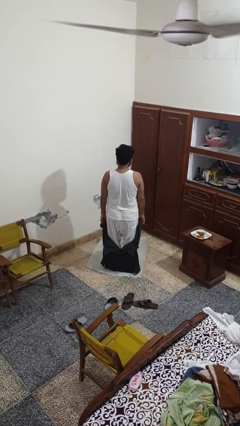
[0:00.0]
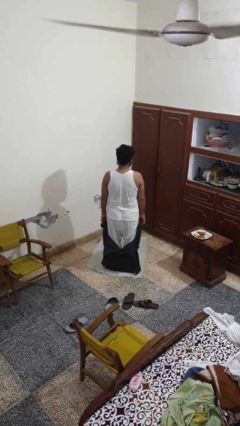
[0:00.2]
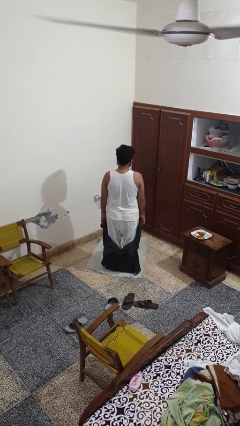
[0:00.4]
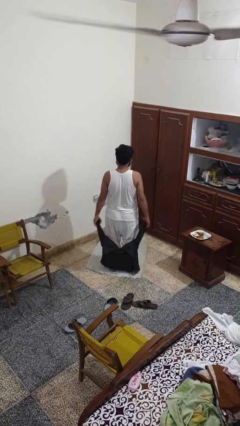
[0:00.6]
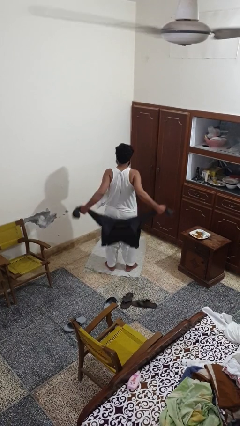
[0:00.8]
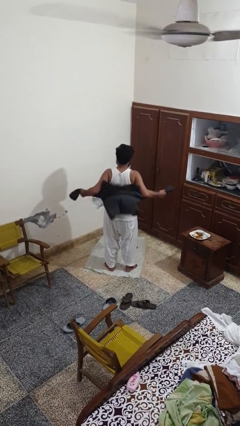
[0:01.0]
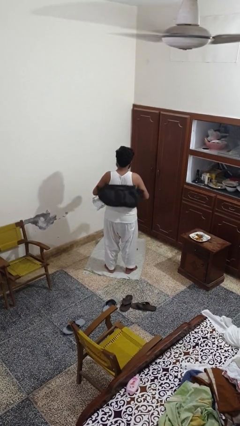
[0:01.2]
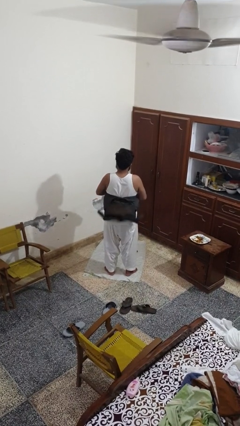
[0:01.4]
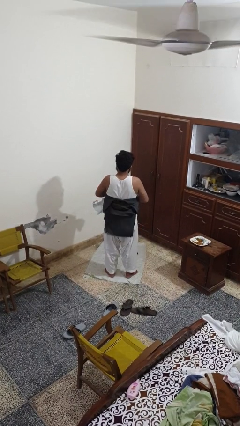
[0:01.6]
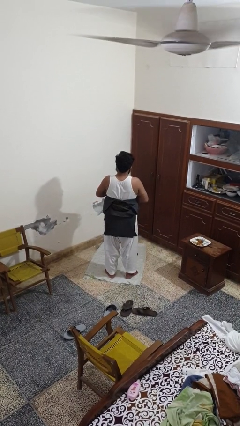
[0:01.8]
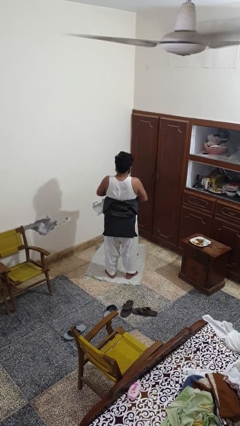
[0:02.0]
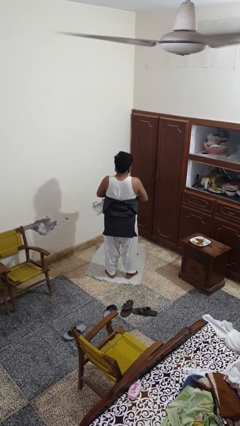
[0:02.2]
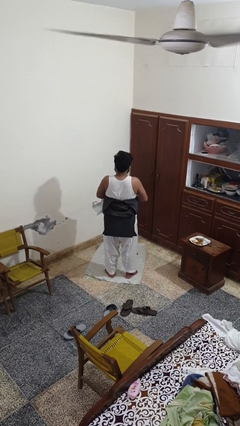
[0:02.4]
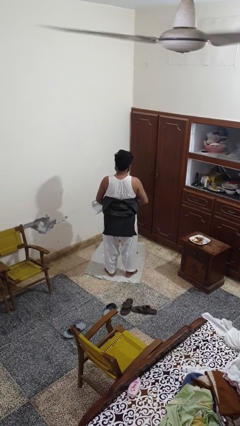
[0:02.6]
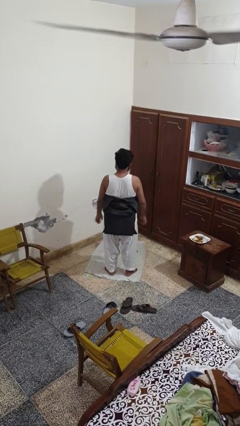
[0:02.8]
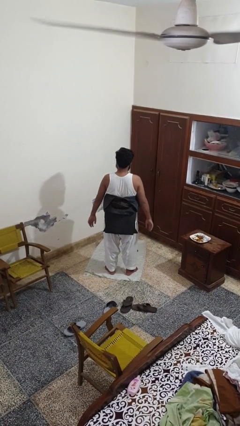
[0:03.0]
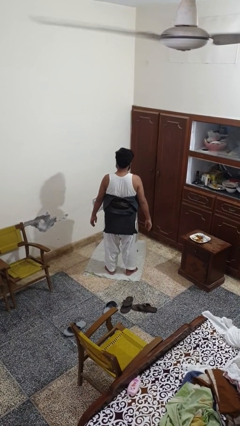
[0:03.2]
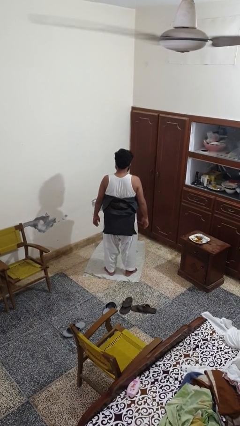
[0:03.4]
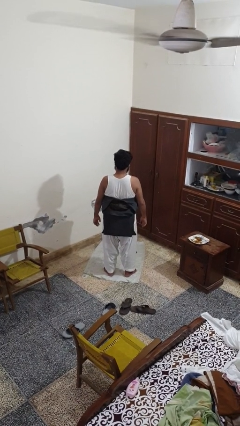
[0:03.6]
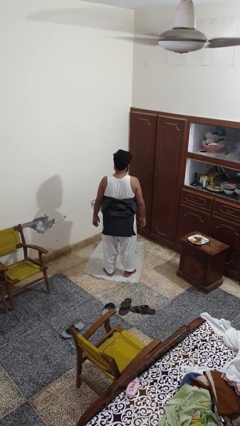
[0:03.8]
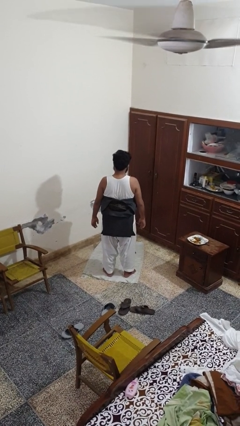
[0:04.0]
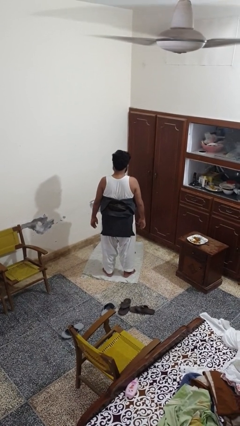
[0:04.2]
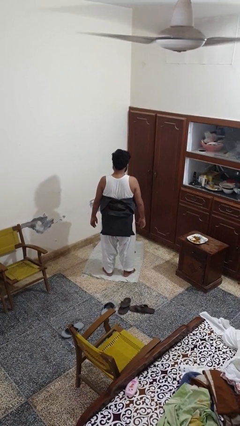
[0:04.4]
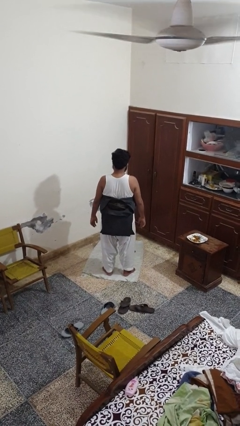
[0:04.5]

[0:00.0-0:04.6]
person ties jacket around waist

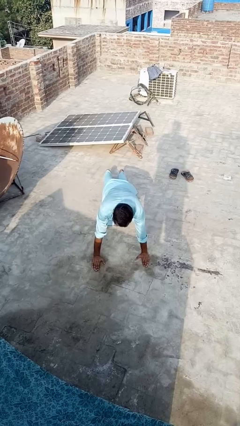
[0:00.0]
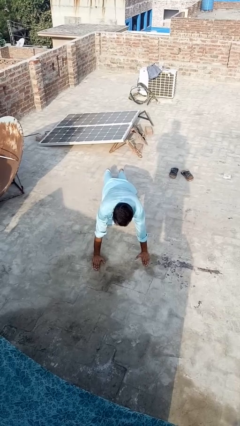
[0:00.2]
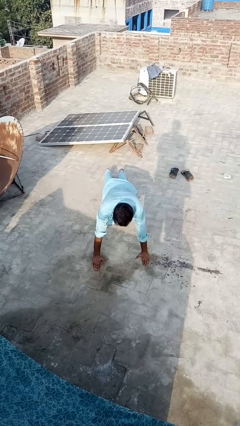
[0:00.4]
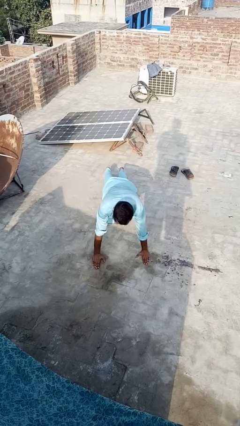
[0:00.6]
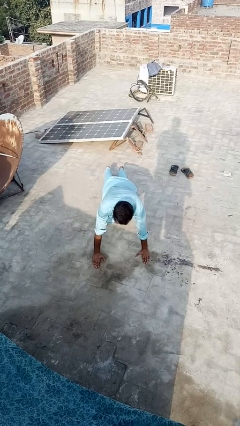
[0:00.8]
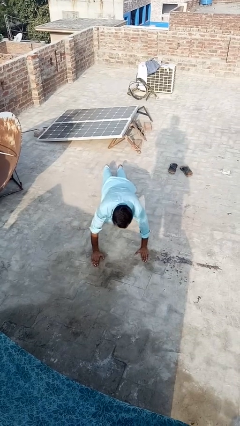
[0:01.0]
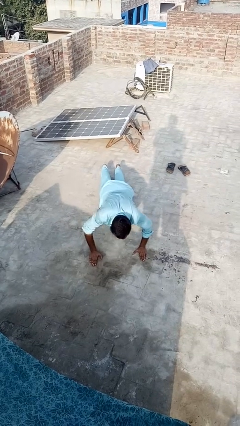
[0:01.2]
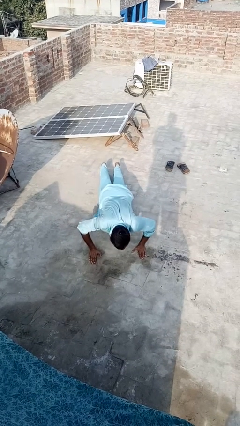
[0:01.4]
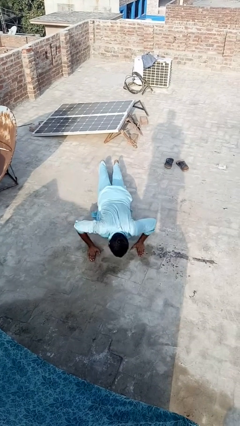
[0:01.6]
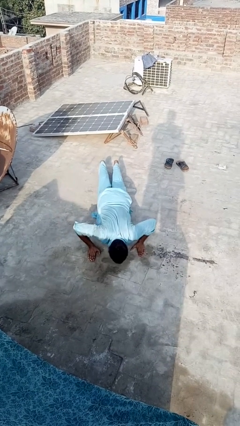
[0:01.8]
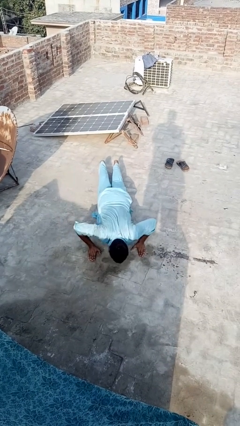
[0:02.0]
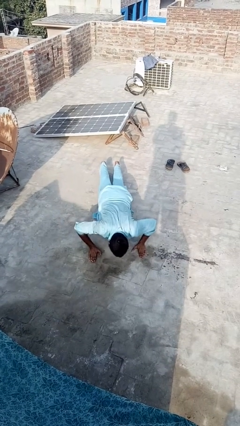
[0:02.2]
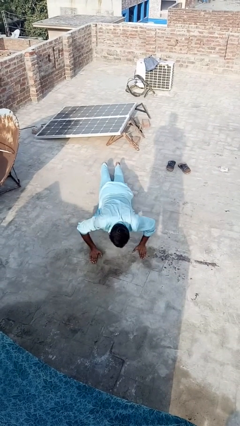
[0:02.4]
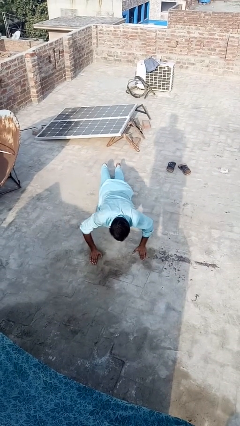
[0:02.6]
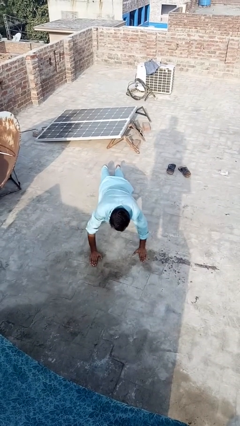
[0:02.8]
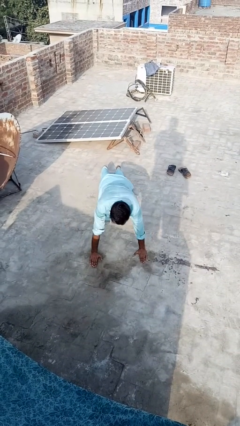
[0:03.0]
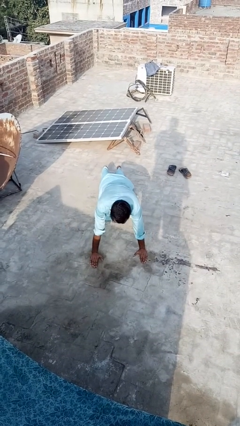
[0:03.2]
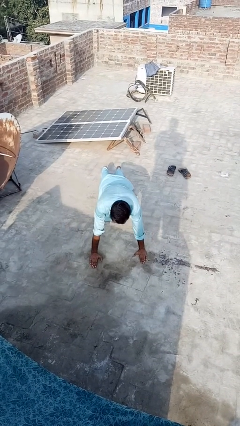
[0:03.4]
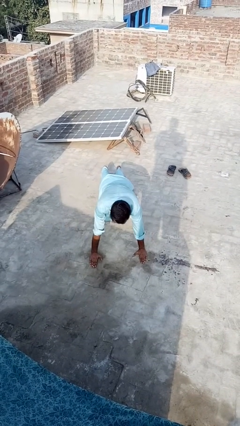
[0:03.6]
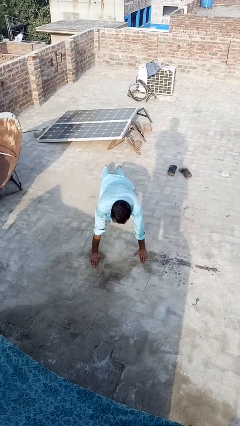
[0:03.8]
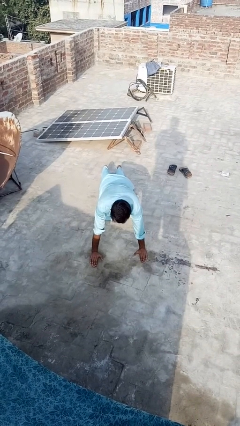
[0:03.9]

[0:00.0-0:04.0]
person exercises with pushup

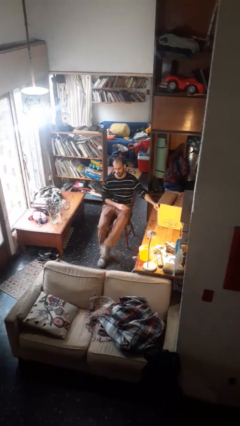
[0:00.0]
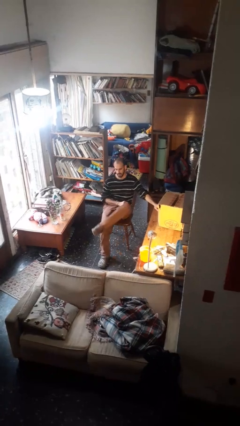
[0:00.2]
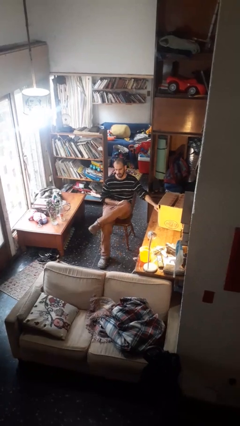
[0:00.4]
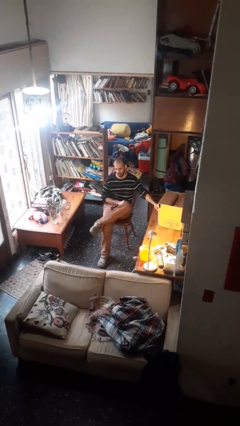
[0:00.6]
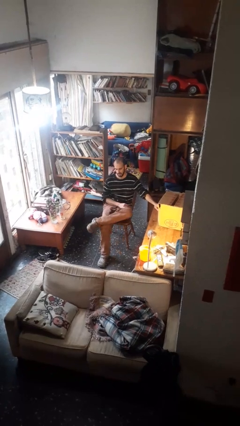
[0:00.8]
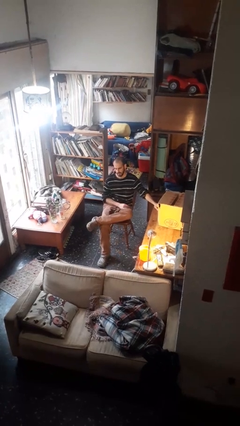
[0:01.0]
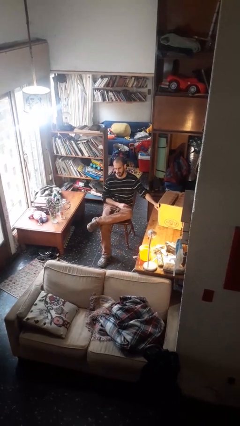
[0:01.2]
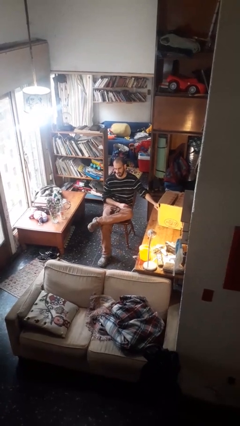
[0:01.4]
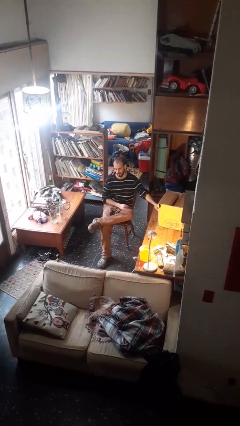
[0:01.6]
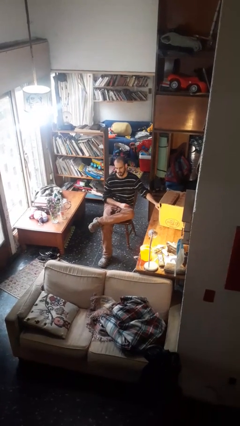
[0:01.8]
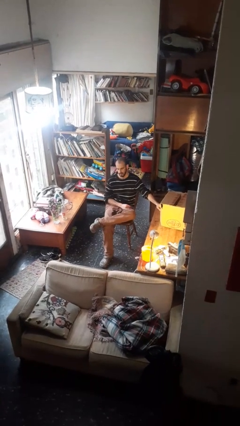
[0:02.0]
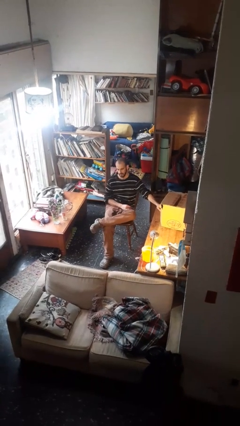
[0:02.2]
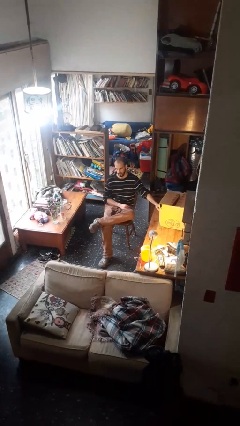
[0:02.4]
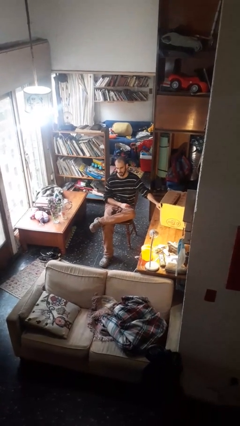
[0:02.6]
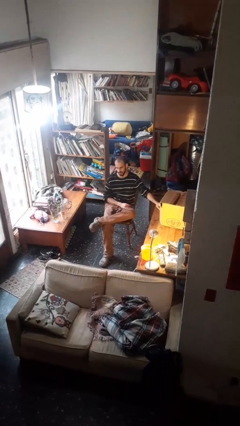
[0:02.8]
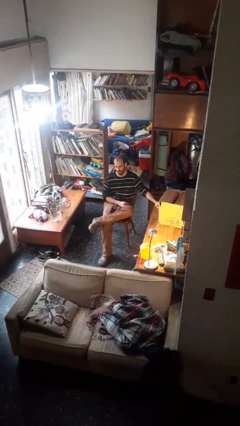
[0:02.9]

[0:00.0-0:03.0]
person crosses legs

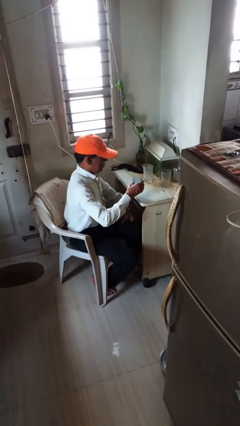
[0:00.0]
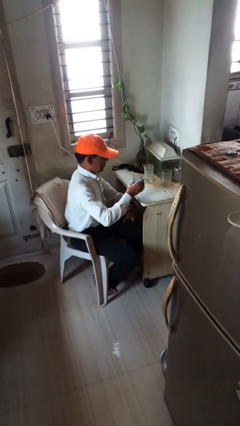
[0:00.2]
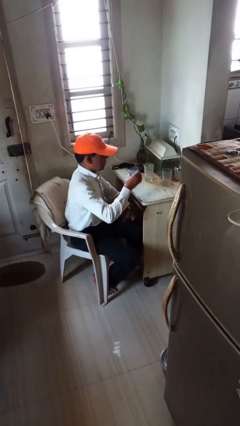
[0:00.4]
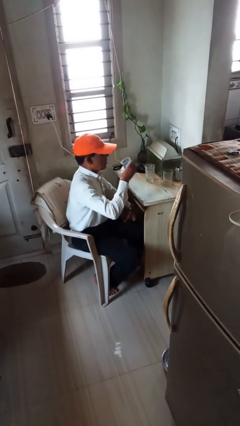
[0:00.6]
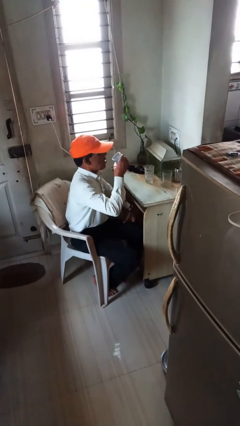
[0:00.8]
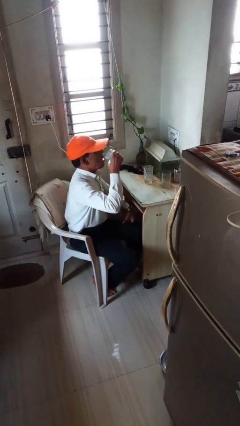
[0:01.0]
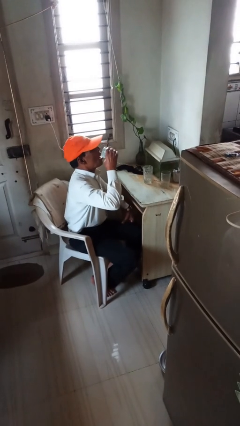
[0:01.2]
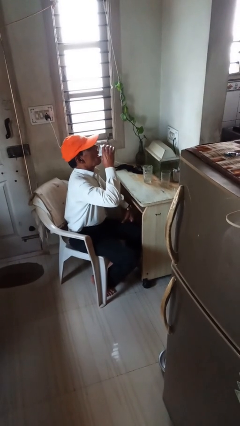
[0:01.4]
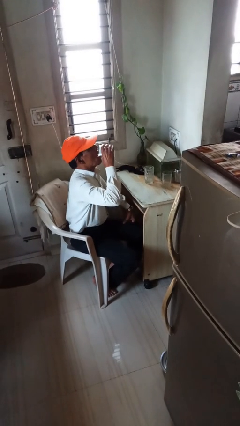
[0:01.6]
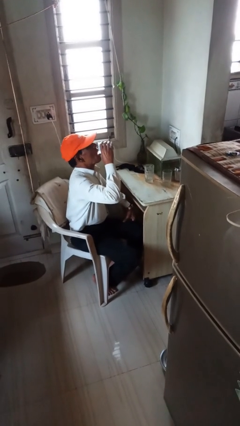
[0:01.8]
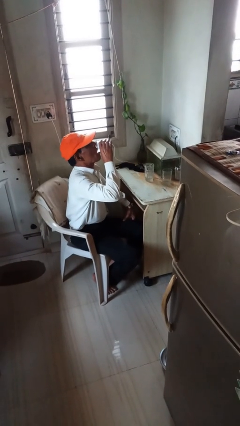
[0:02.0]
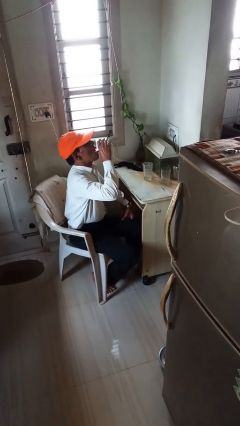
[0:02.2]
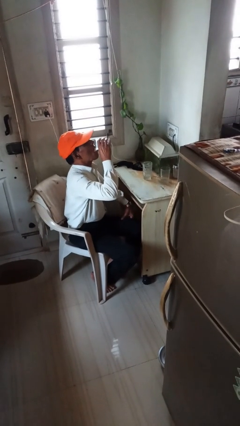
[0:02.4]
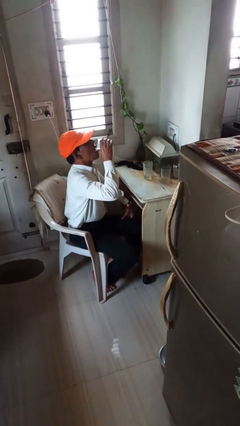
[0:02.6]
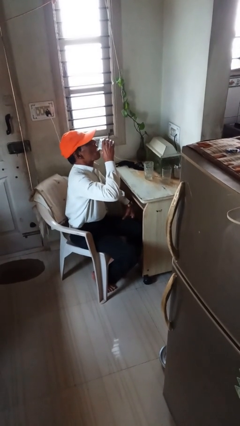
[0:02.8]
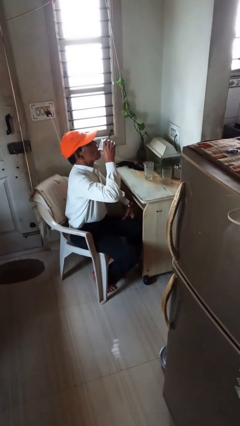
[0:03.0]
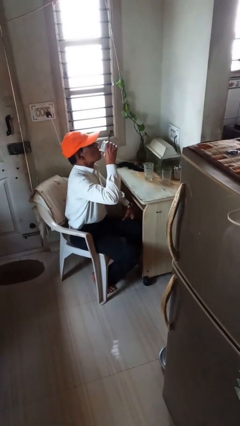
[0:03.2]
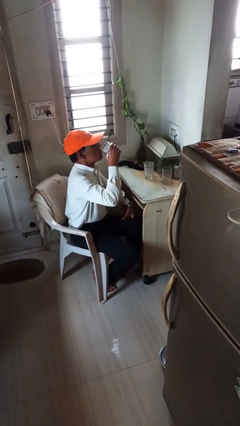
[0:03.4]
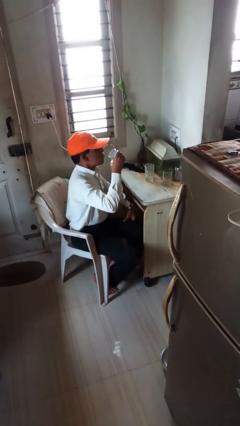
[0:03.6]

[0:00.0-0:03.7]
person drinks from shotglass

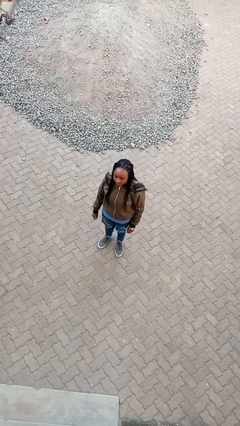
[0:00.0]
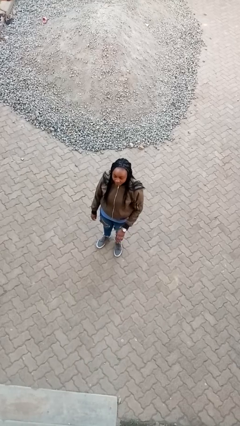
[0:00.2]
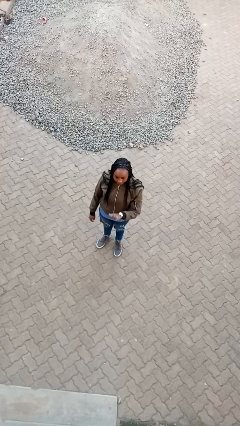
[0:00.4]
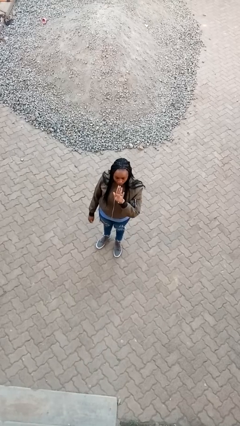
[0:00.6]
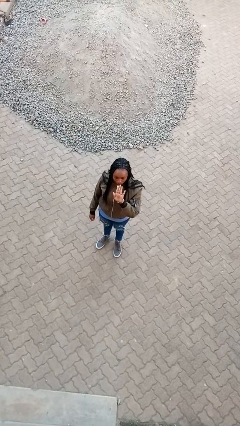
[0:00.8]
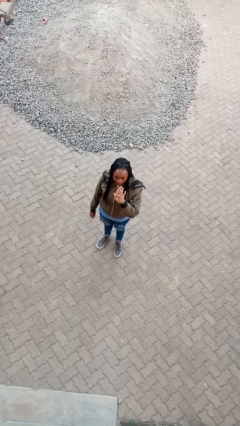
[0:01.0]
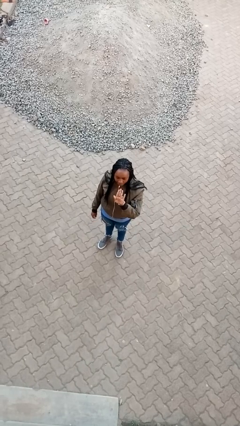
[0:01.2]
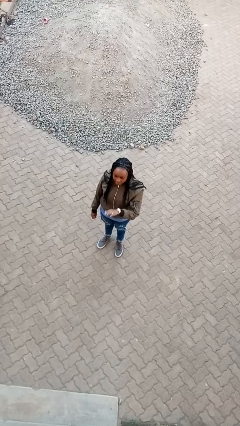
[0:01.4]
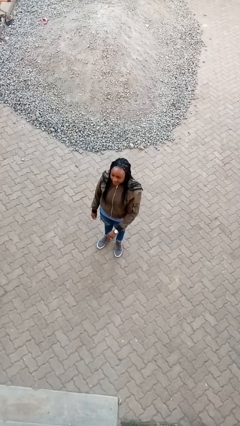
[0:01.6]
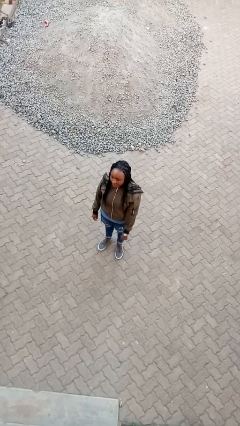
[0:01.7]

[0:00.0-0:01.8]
person gestures stop

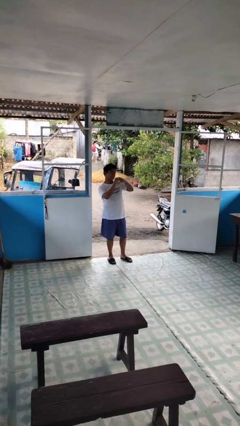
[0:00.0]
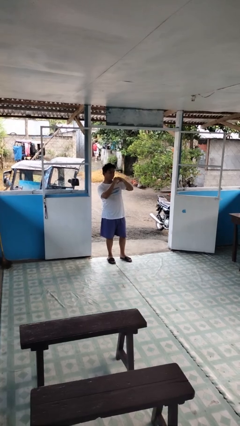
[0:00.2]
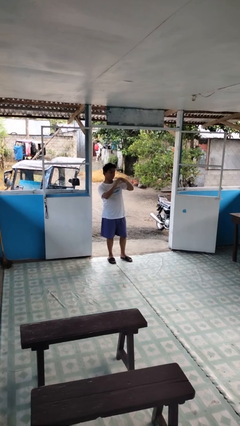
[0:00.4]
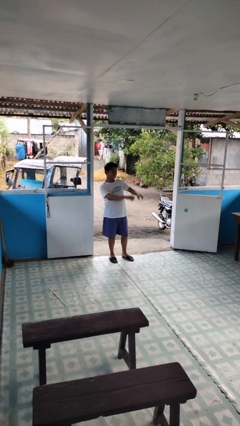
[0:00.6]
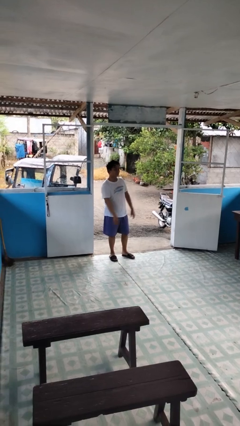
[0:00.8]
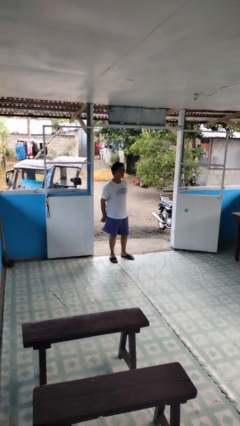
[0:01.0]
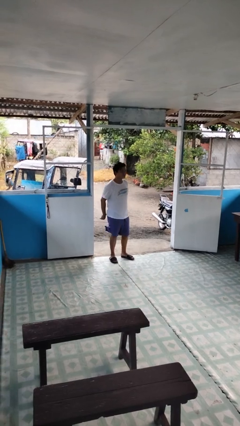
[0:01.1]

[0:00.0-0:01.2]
person gestures heart
